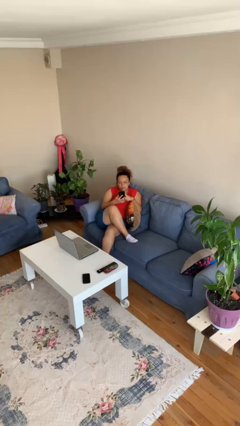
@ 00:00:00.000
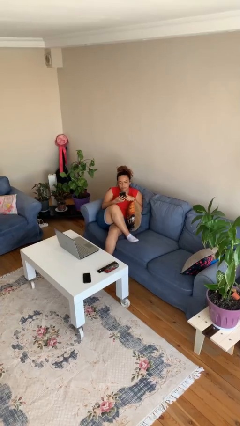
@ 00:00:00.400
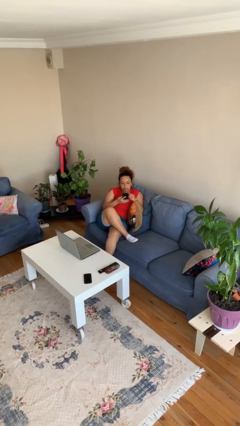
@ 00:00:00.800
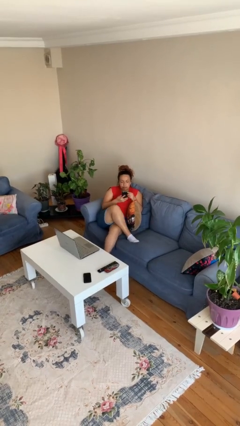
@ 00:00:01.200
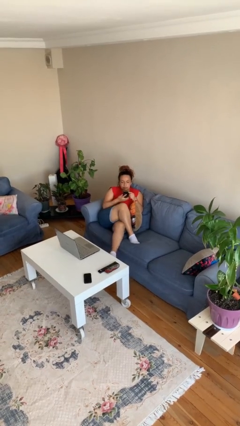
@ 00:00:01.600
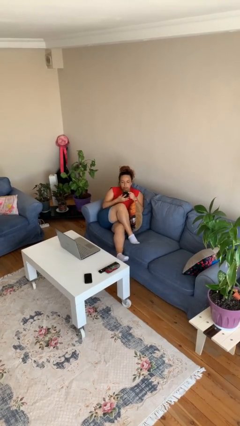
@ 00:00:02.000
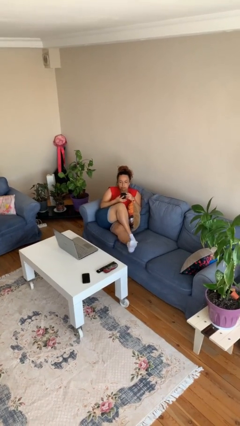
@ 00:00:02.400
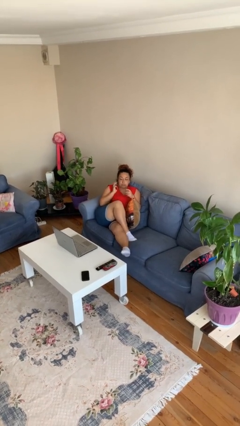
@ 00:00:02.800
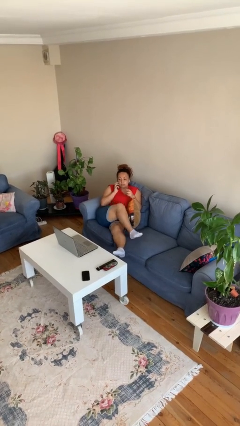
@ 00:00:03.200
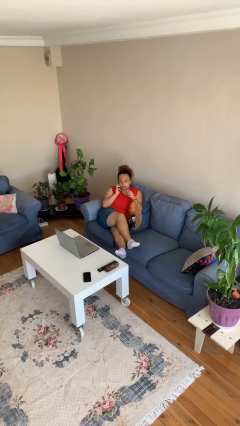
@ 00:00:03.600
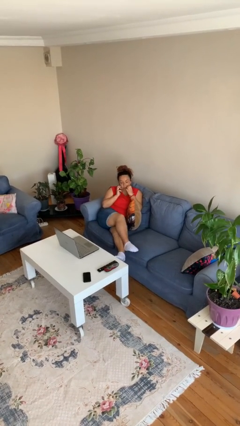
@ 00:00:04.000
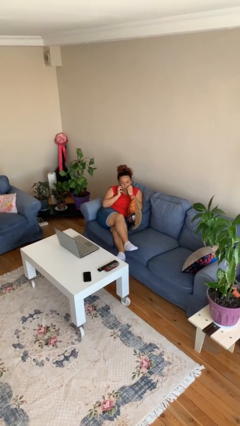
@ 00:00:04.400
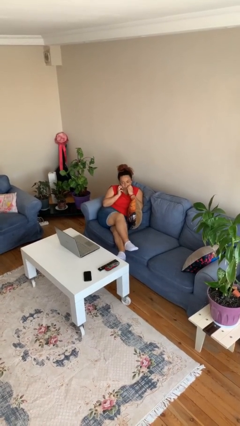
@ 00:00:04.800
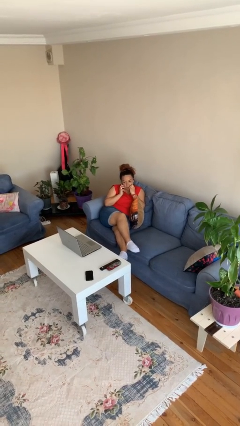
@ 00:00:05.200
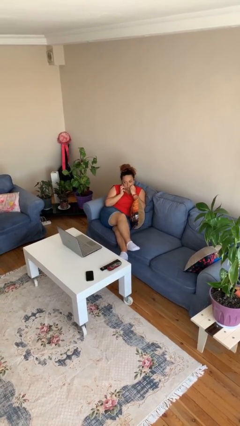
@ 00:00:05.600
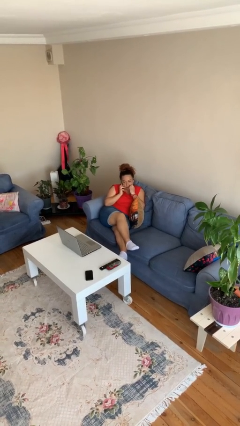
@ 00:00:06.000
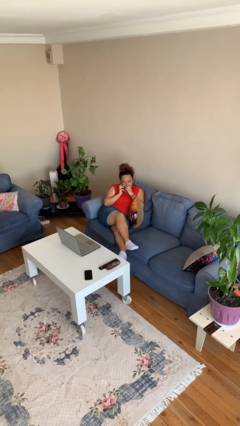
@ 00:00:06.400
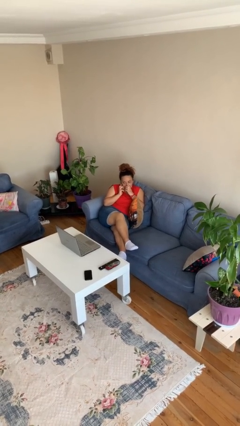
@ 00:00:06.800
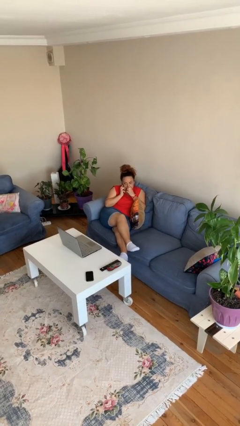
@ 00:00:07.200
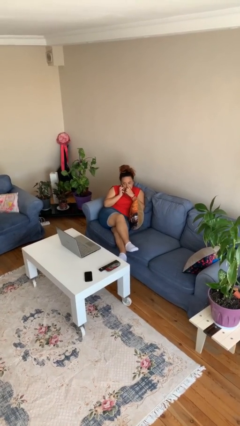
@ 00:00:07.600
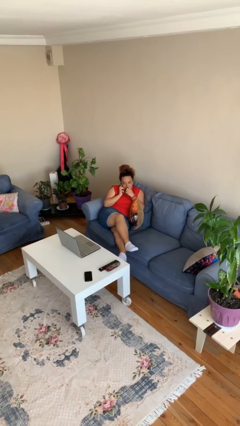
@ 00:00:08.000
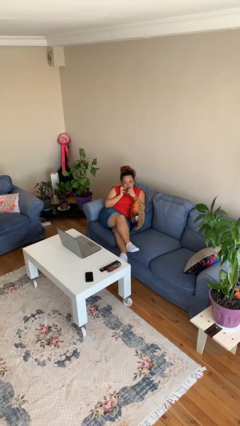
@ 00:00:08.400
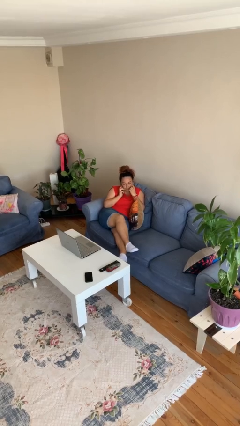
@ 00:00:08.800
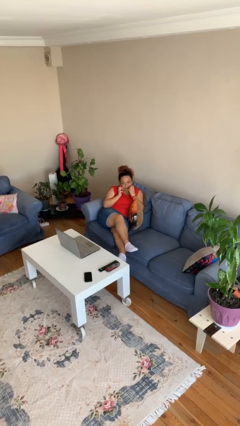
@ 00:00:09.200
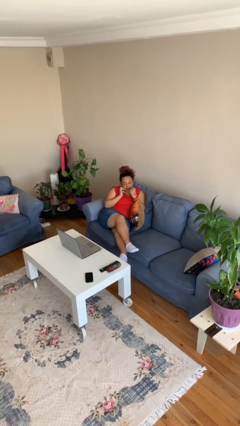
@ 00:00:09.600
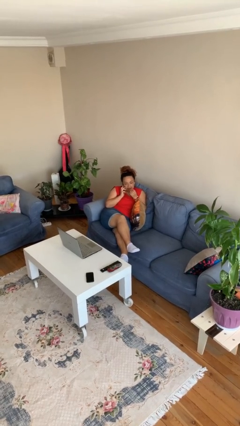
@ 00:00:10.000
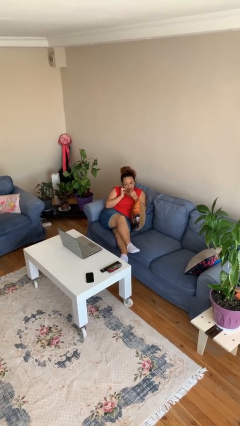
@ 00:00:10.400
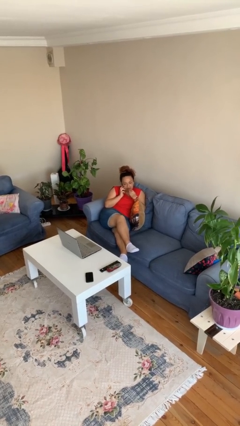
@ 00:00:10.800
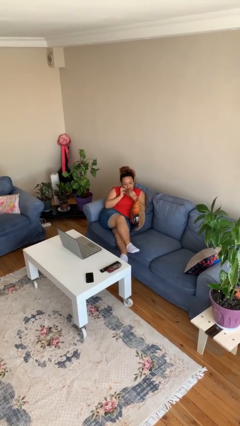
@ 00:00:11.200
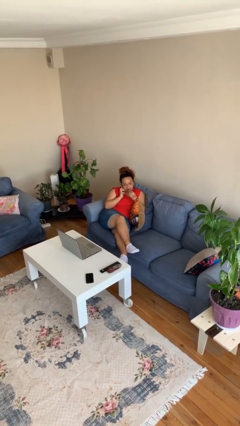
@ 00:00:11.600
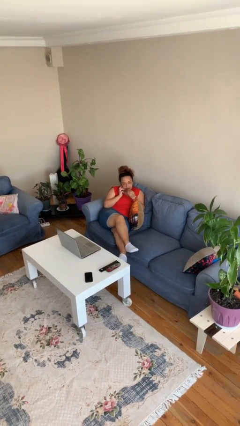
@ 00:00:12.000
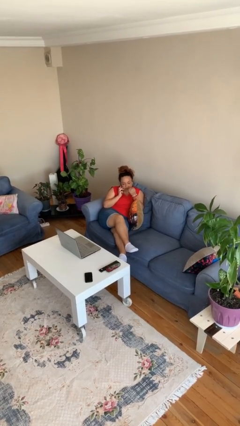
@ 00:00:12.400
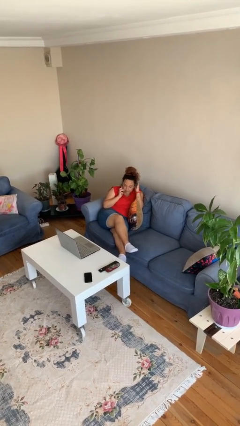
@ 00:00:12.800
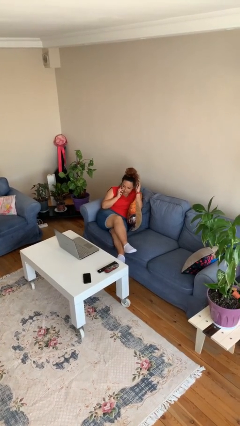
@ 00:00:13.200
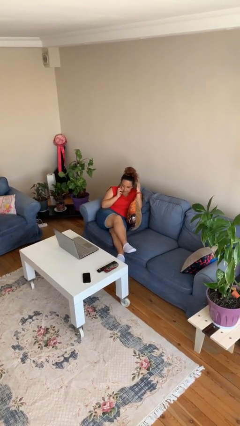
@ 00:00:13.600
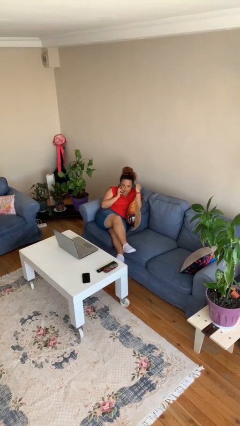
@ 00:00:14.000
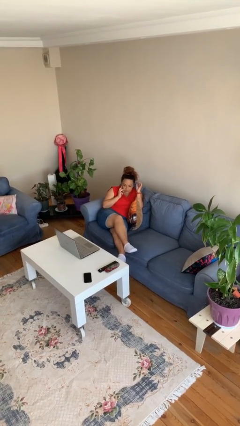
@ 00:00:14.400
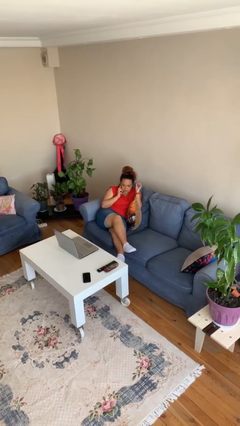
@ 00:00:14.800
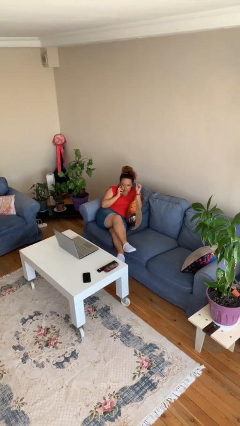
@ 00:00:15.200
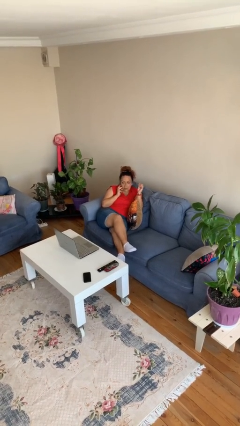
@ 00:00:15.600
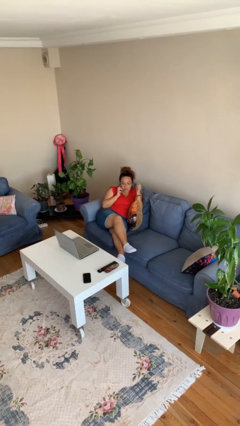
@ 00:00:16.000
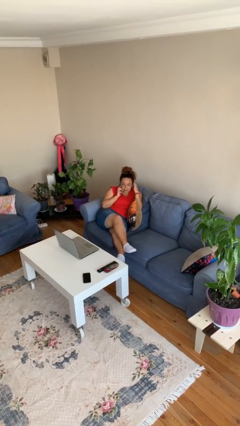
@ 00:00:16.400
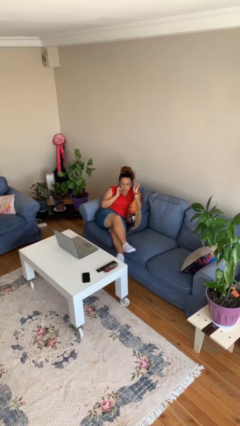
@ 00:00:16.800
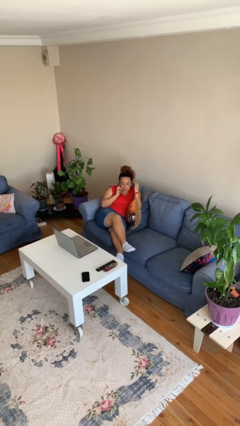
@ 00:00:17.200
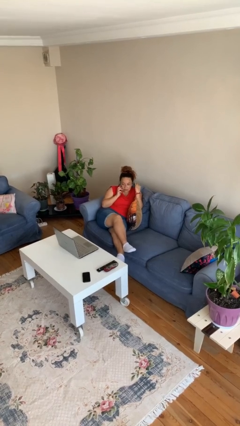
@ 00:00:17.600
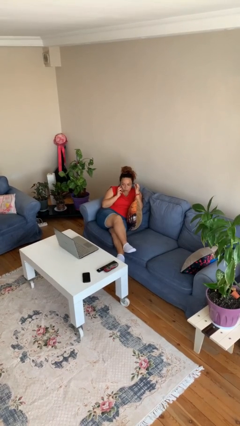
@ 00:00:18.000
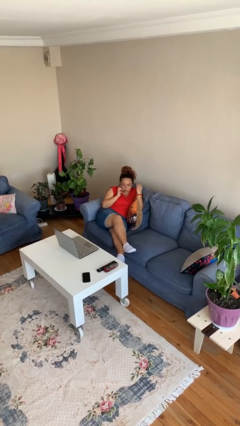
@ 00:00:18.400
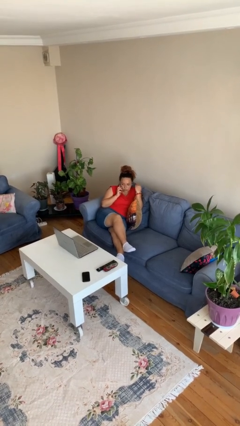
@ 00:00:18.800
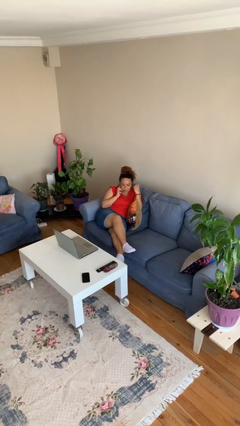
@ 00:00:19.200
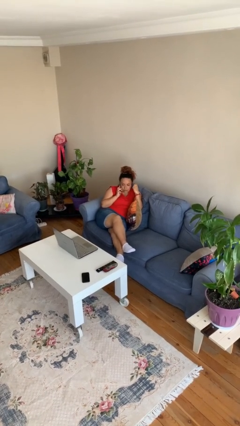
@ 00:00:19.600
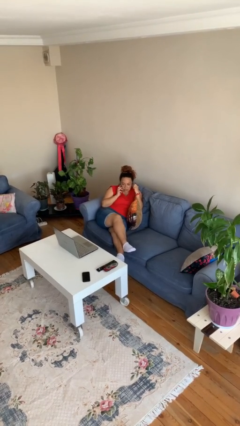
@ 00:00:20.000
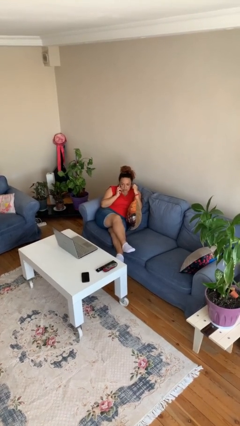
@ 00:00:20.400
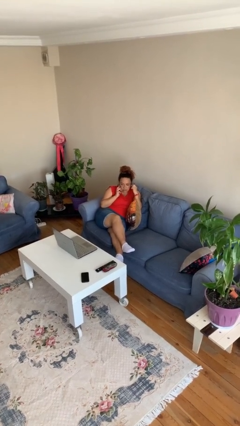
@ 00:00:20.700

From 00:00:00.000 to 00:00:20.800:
person talks on phone

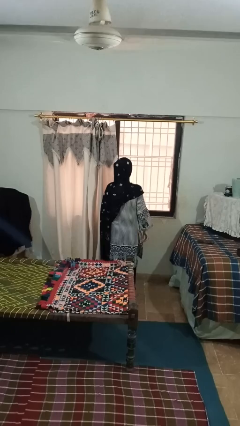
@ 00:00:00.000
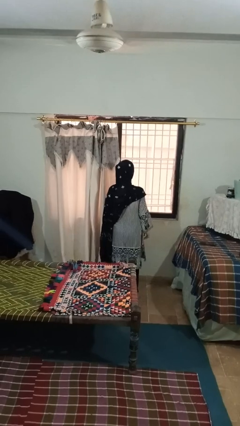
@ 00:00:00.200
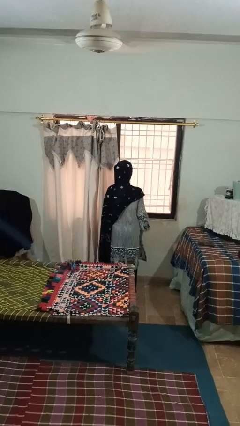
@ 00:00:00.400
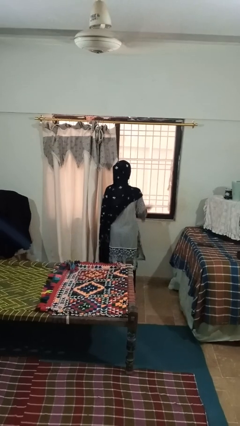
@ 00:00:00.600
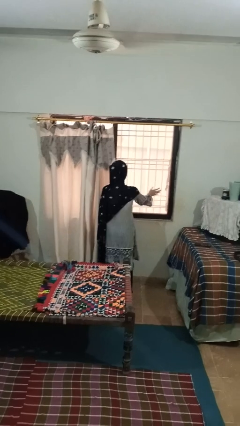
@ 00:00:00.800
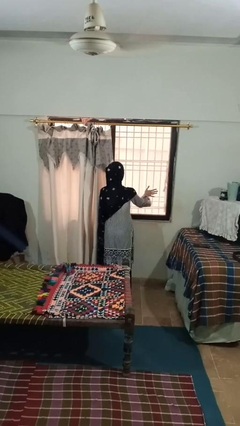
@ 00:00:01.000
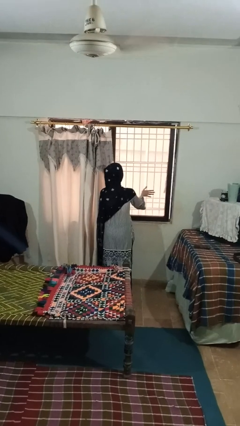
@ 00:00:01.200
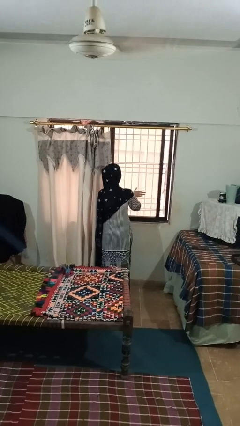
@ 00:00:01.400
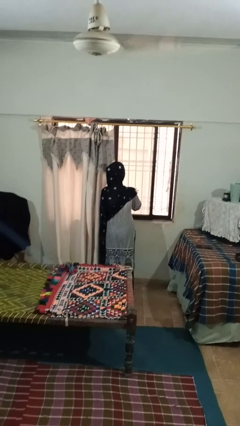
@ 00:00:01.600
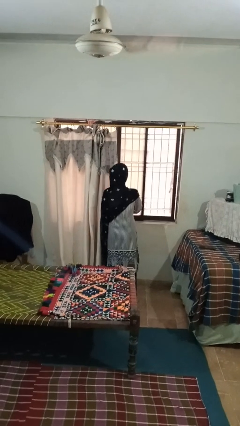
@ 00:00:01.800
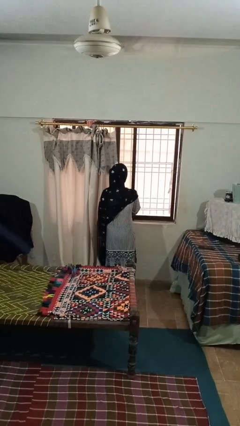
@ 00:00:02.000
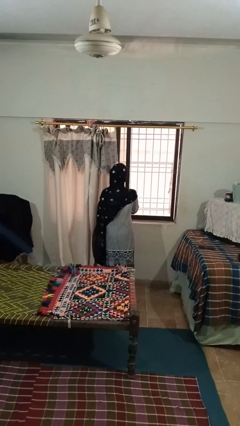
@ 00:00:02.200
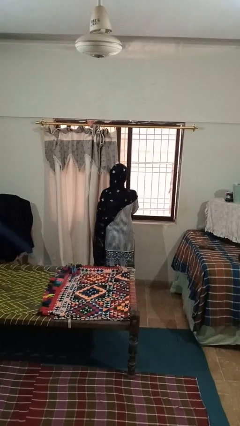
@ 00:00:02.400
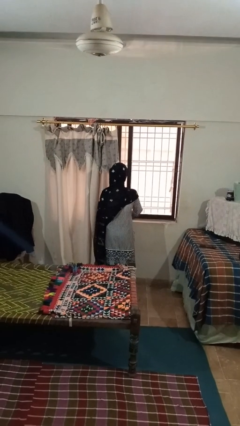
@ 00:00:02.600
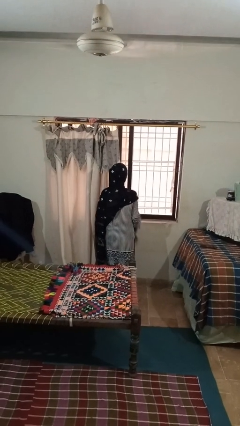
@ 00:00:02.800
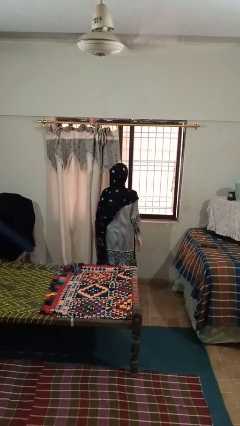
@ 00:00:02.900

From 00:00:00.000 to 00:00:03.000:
person opens home window

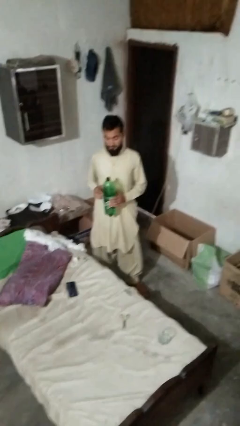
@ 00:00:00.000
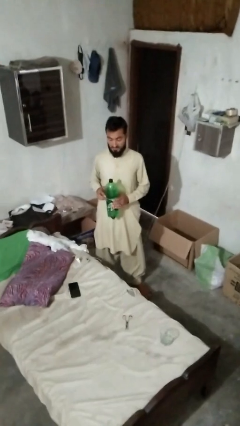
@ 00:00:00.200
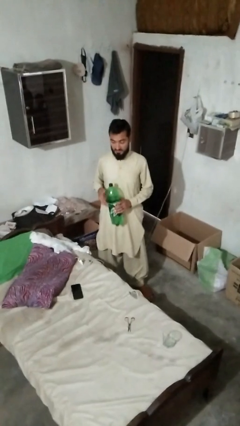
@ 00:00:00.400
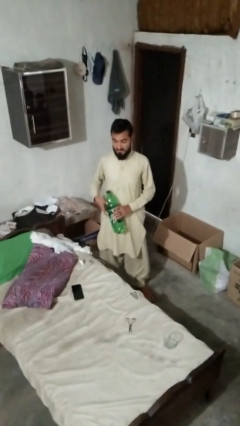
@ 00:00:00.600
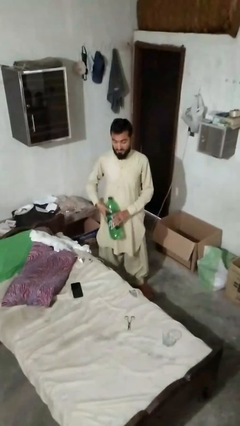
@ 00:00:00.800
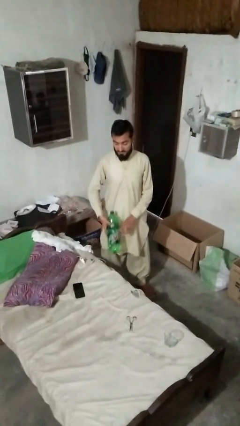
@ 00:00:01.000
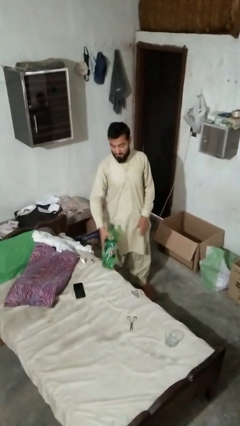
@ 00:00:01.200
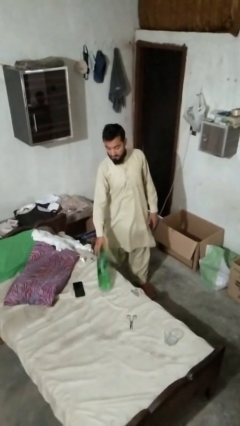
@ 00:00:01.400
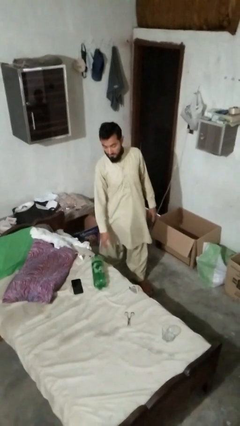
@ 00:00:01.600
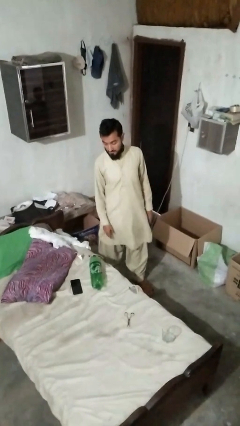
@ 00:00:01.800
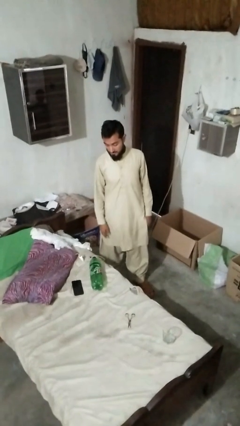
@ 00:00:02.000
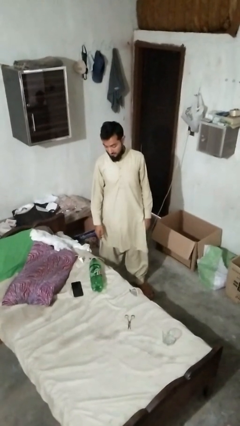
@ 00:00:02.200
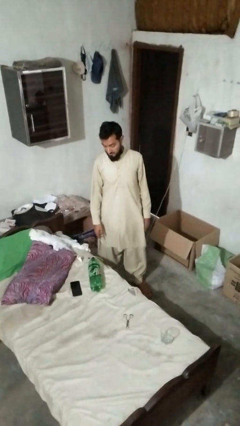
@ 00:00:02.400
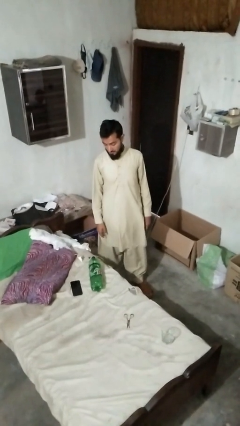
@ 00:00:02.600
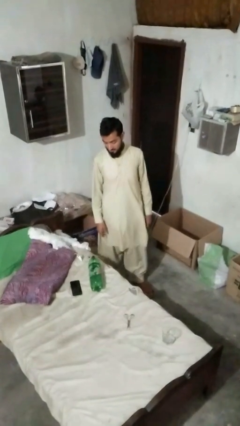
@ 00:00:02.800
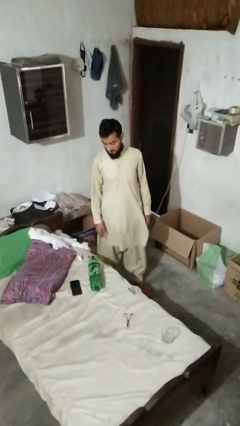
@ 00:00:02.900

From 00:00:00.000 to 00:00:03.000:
person puts down object on bed

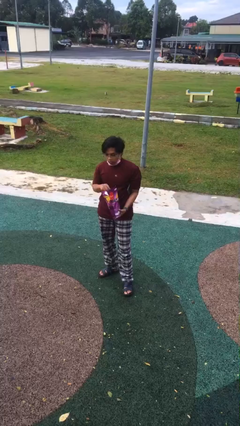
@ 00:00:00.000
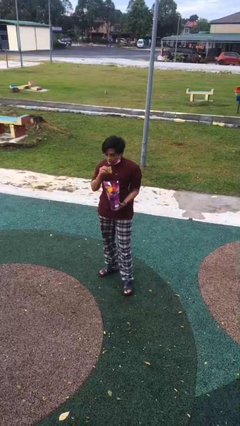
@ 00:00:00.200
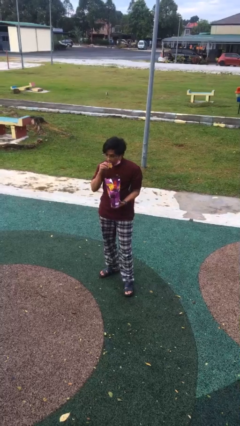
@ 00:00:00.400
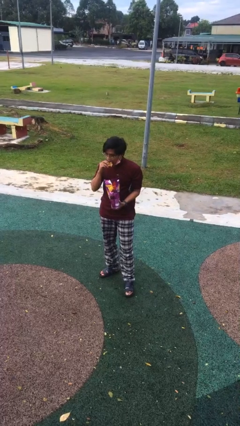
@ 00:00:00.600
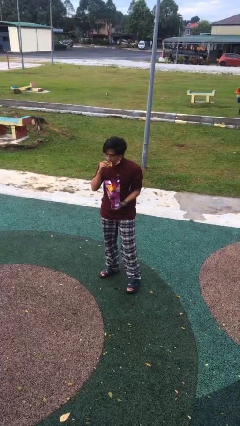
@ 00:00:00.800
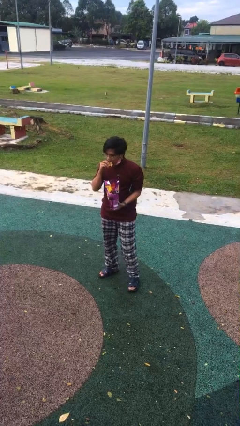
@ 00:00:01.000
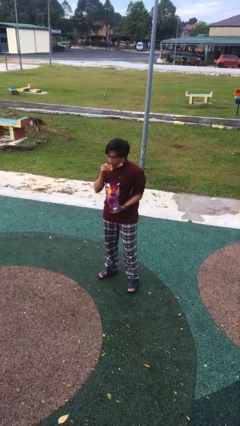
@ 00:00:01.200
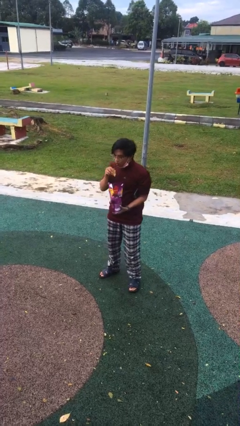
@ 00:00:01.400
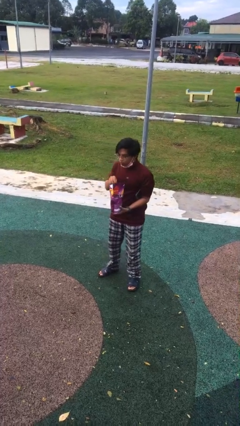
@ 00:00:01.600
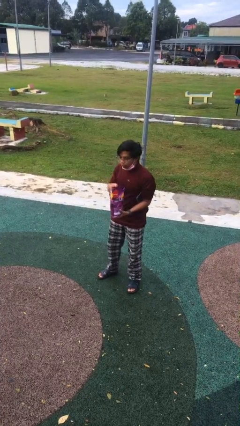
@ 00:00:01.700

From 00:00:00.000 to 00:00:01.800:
person eats snack from bag
